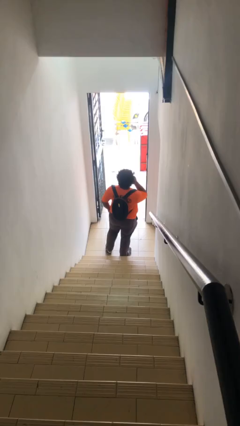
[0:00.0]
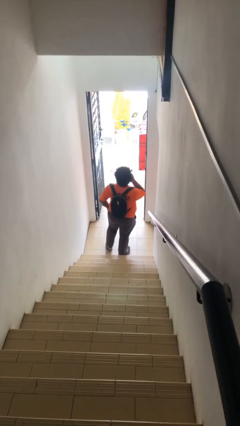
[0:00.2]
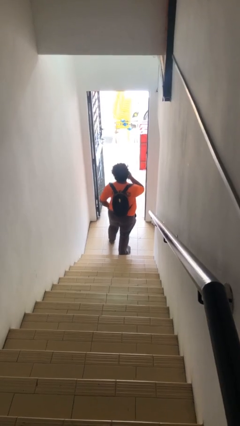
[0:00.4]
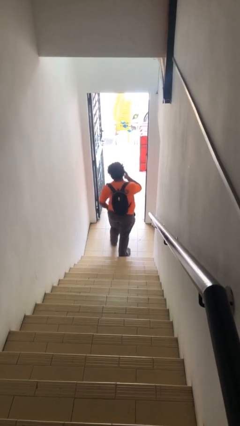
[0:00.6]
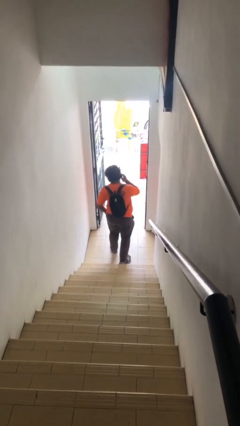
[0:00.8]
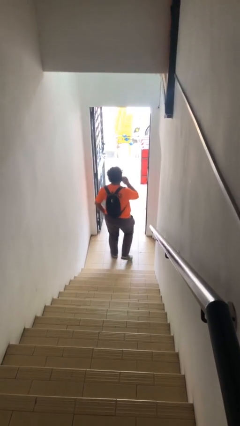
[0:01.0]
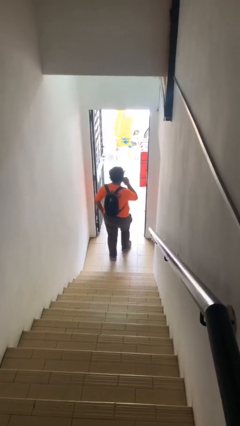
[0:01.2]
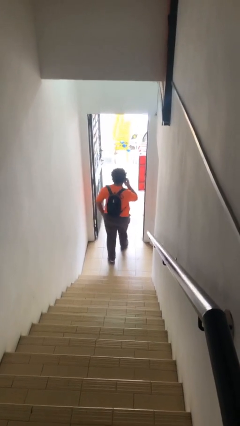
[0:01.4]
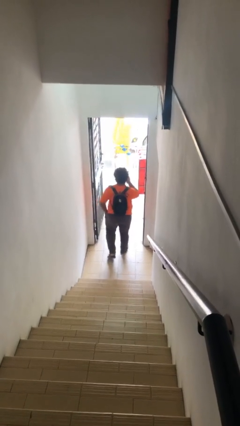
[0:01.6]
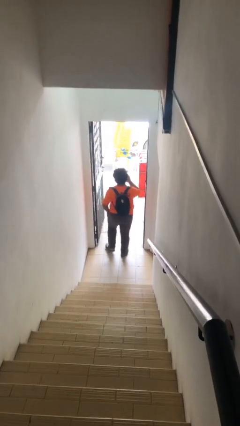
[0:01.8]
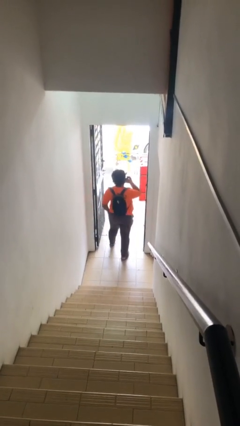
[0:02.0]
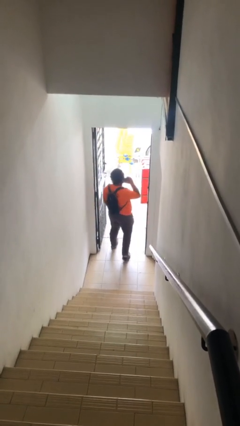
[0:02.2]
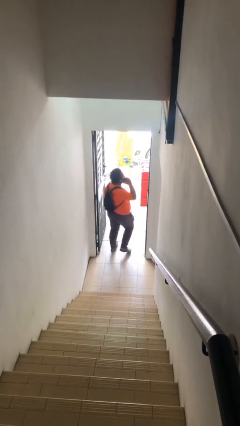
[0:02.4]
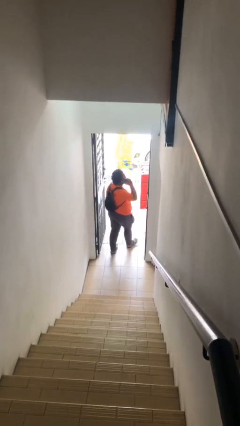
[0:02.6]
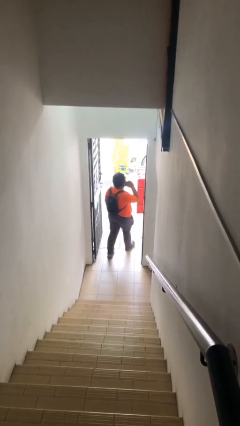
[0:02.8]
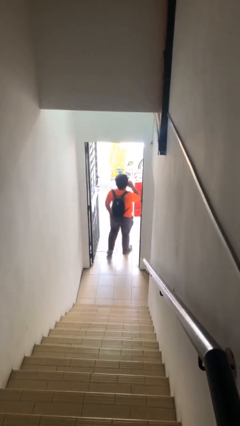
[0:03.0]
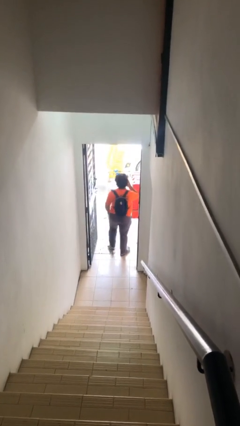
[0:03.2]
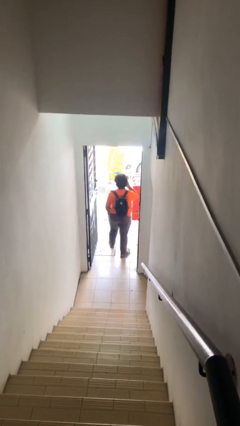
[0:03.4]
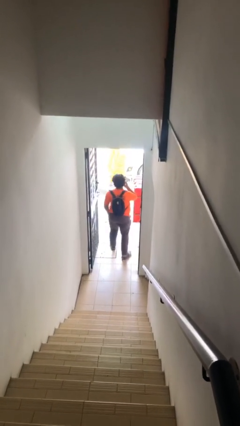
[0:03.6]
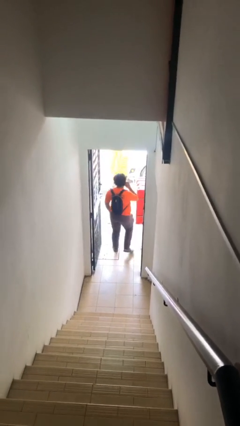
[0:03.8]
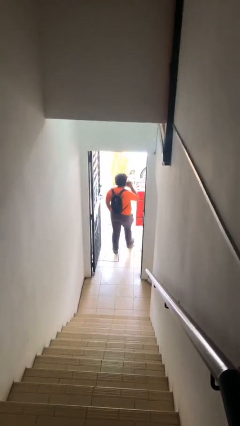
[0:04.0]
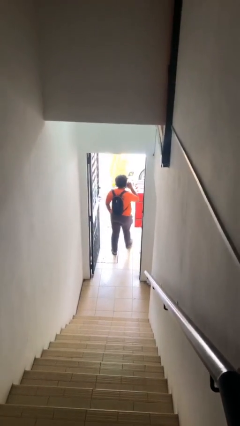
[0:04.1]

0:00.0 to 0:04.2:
person exits scene through structure

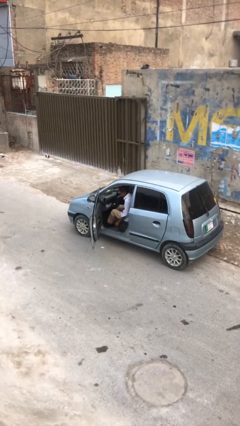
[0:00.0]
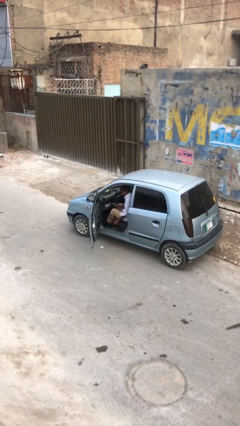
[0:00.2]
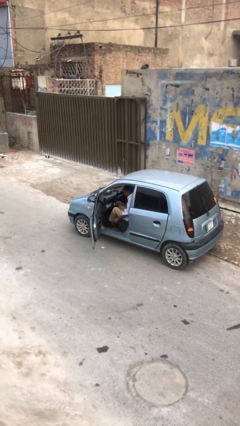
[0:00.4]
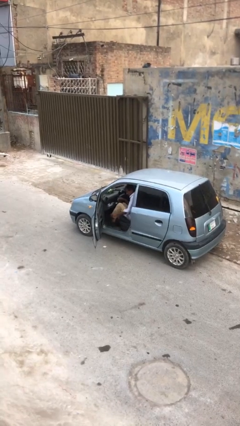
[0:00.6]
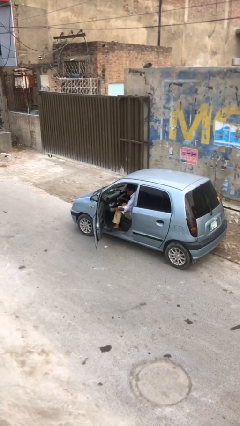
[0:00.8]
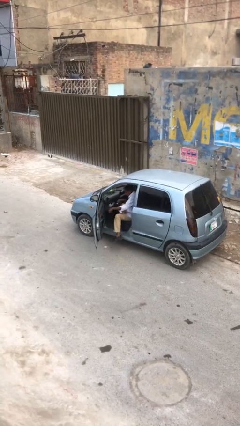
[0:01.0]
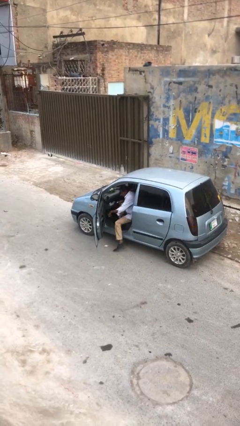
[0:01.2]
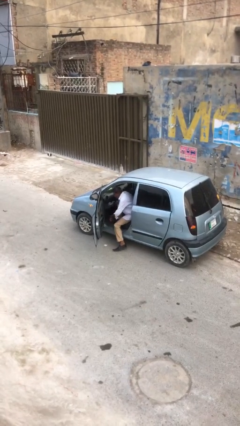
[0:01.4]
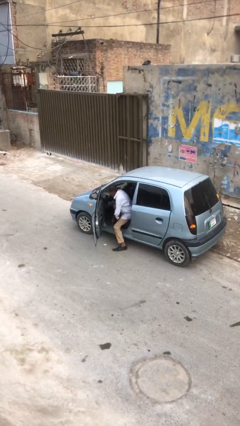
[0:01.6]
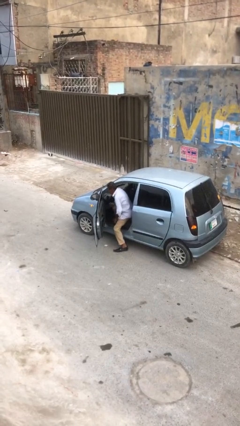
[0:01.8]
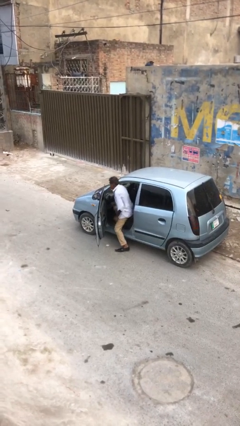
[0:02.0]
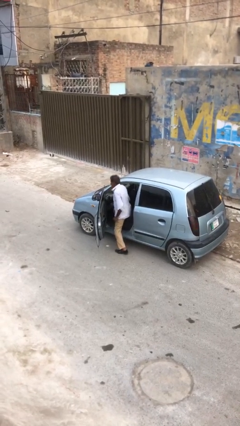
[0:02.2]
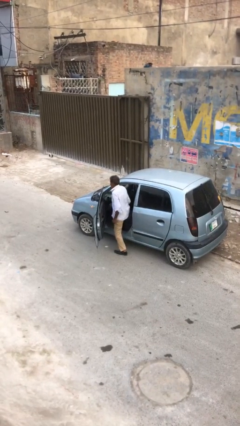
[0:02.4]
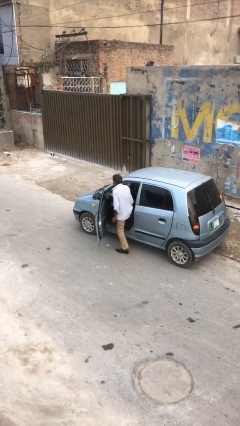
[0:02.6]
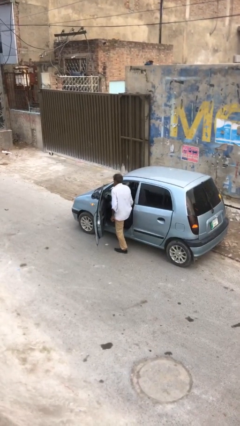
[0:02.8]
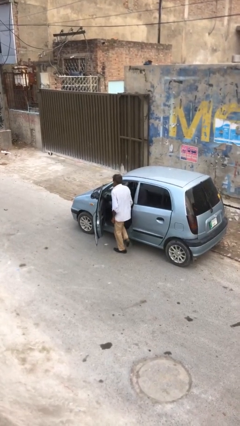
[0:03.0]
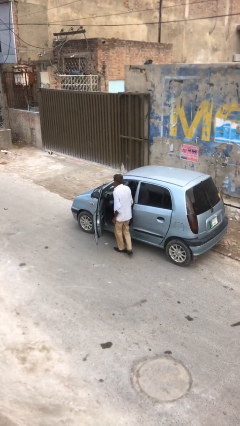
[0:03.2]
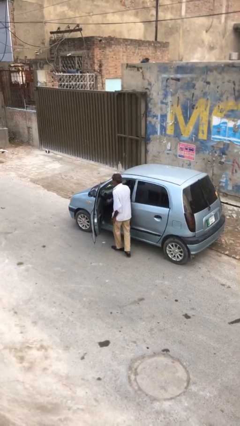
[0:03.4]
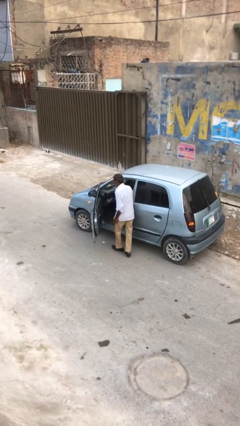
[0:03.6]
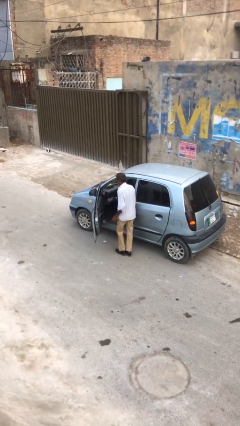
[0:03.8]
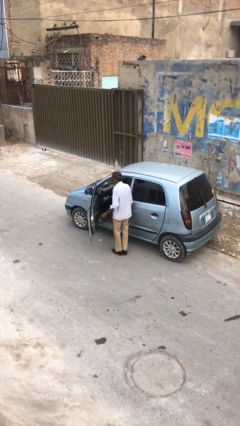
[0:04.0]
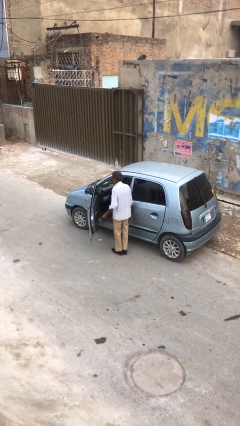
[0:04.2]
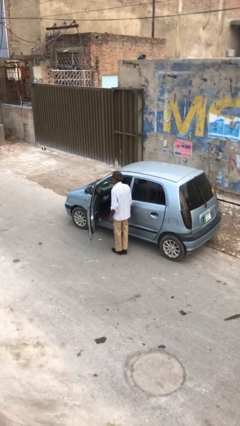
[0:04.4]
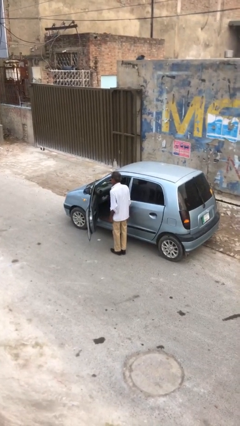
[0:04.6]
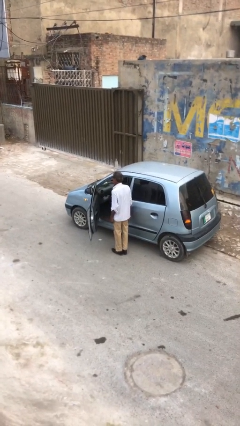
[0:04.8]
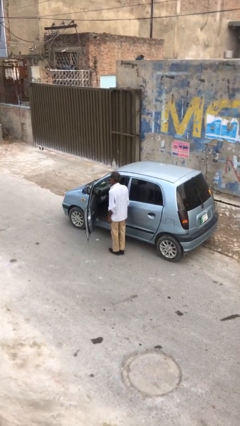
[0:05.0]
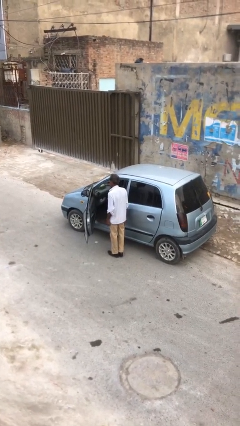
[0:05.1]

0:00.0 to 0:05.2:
person exits car

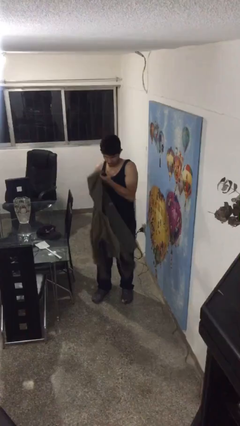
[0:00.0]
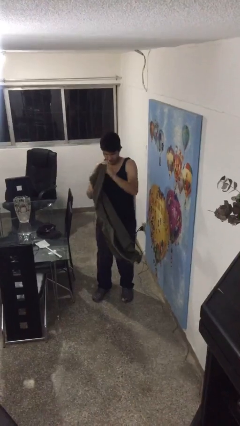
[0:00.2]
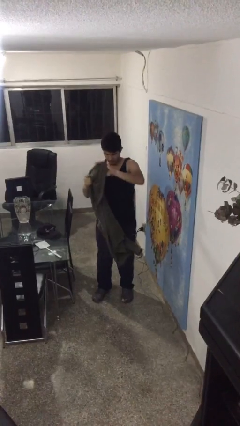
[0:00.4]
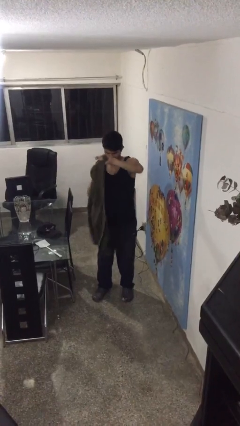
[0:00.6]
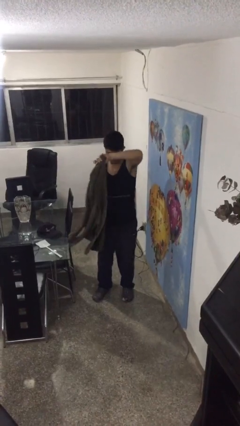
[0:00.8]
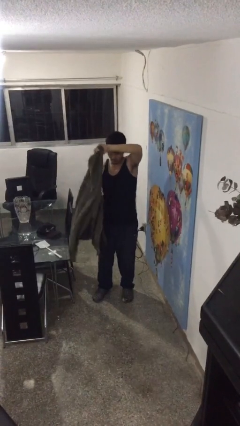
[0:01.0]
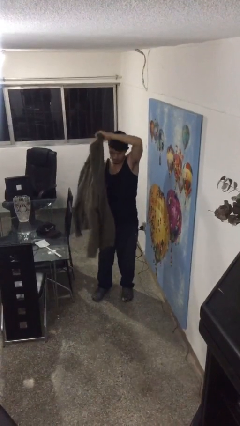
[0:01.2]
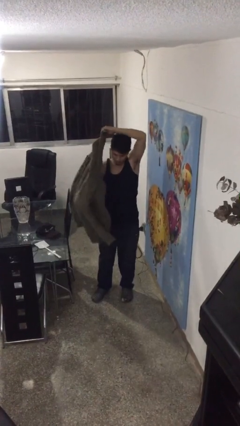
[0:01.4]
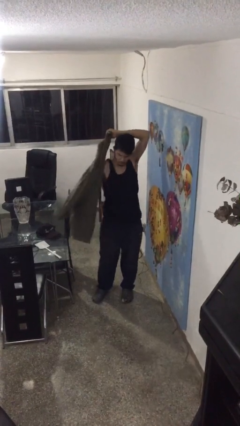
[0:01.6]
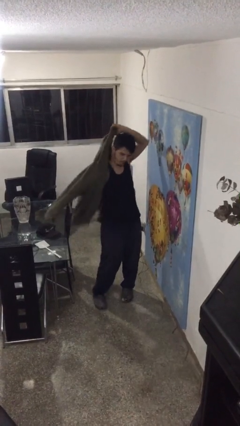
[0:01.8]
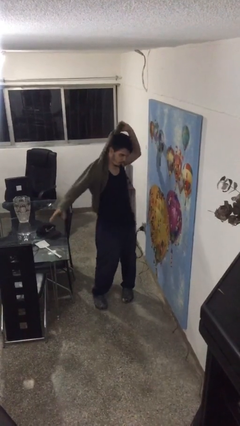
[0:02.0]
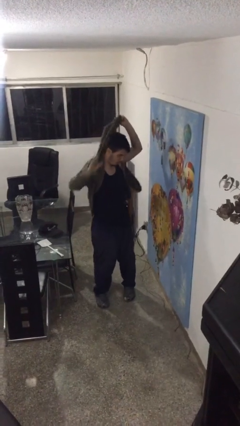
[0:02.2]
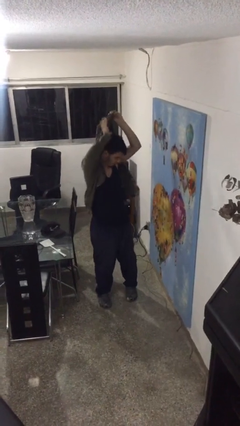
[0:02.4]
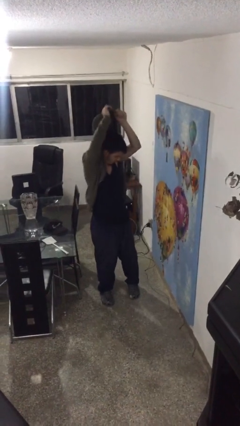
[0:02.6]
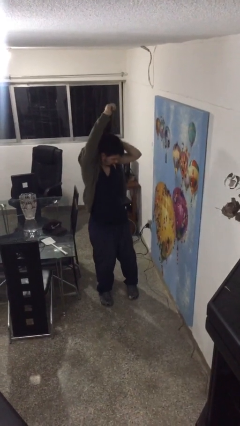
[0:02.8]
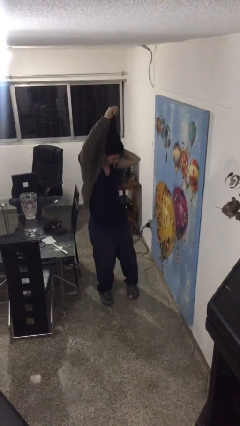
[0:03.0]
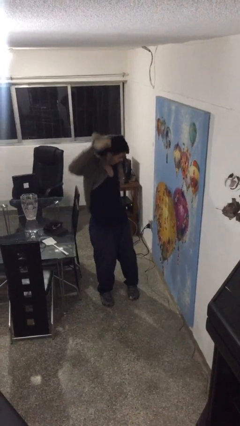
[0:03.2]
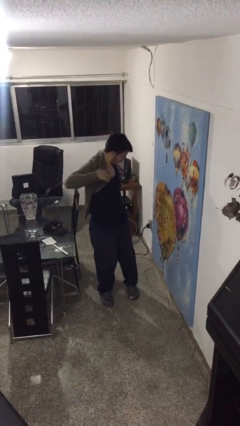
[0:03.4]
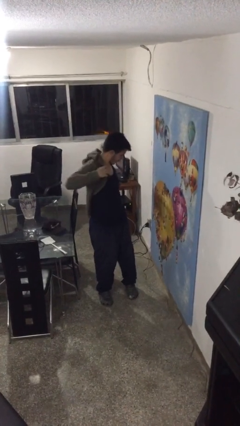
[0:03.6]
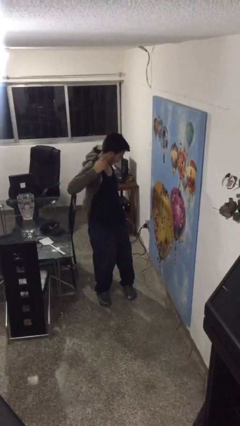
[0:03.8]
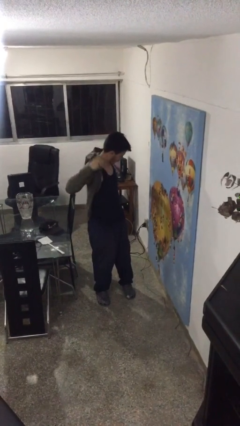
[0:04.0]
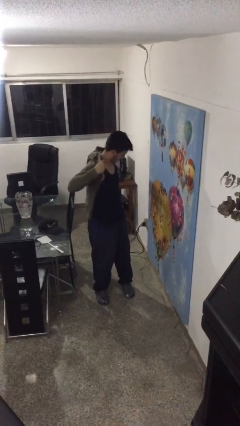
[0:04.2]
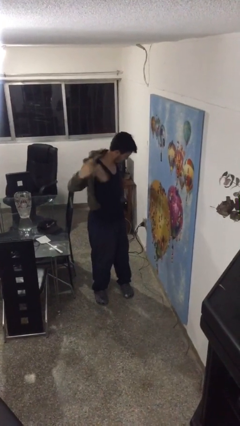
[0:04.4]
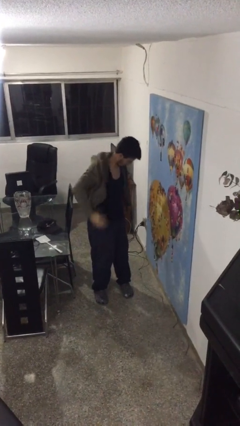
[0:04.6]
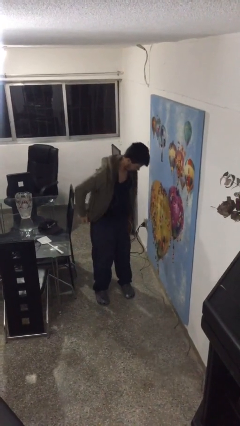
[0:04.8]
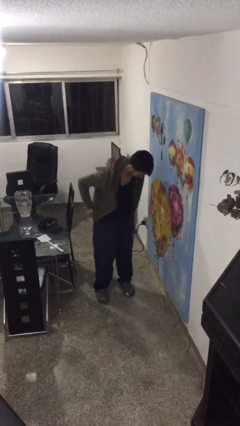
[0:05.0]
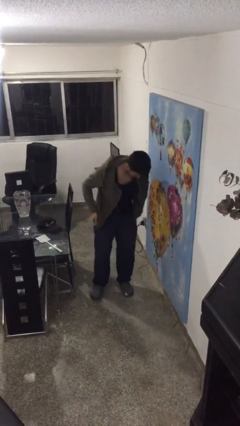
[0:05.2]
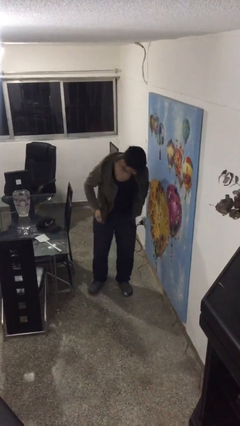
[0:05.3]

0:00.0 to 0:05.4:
person puts on jacket

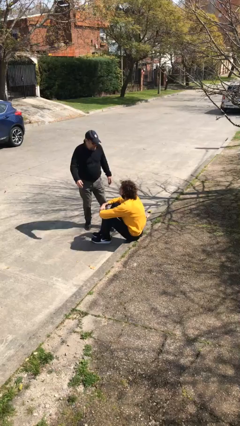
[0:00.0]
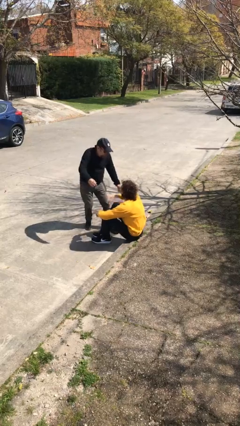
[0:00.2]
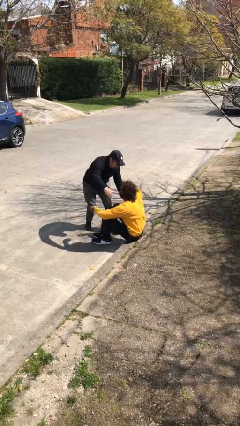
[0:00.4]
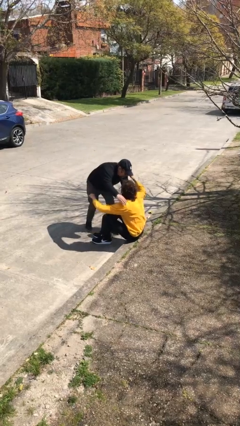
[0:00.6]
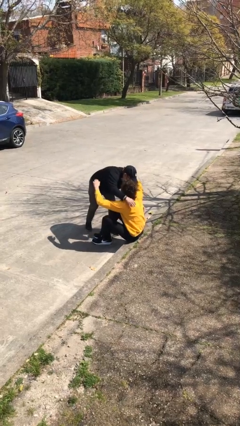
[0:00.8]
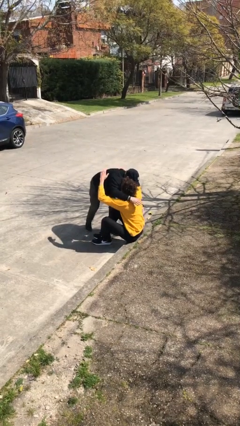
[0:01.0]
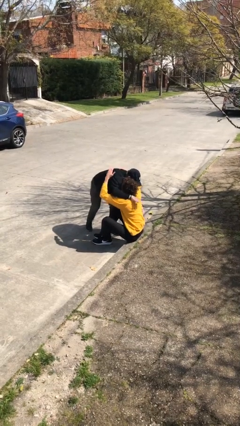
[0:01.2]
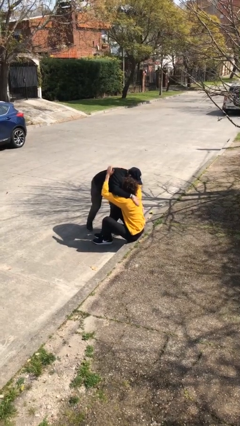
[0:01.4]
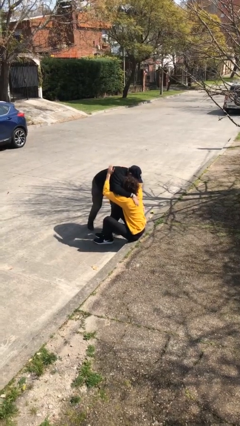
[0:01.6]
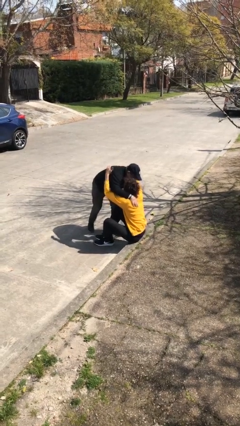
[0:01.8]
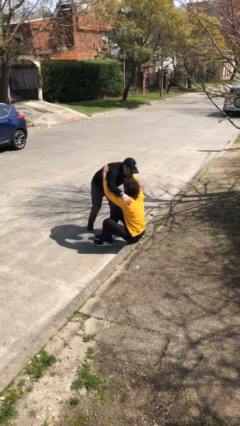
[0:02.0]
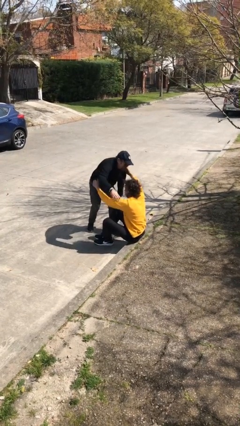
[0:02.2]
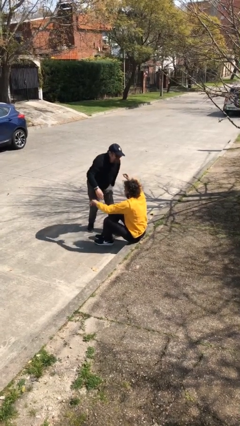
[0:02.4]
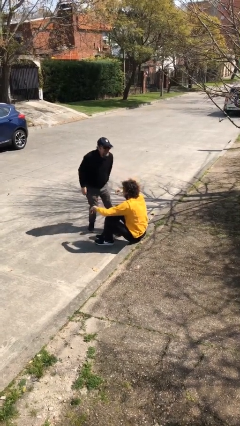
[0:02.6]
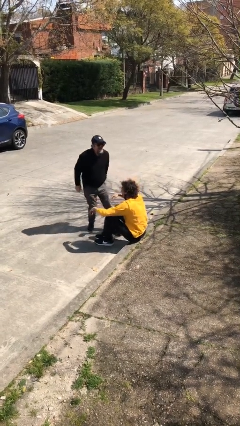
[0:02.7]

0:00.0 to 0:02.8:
person embraces person

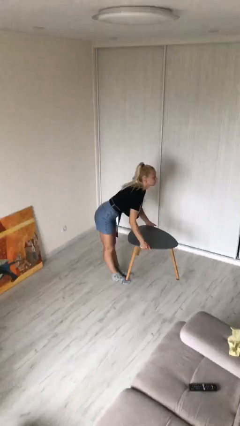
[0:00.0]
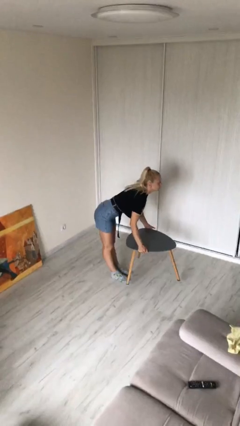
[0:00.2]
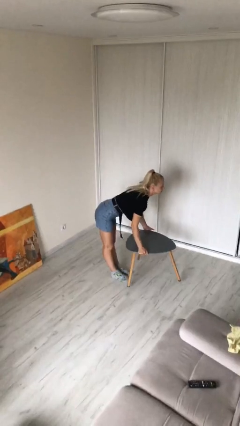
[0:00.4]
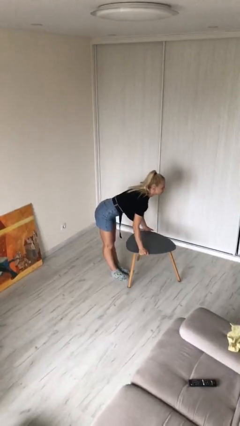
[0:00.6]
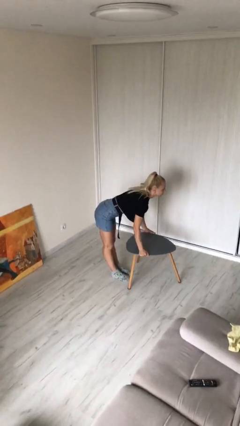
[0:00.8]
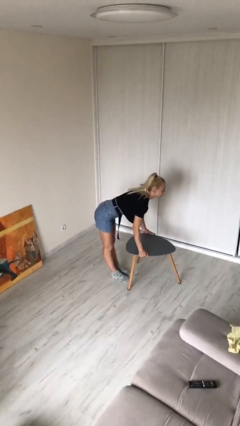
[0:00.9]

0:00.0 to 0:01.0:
person puts down object on floor
